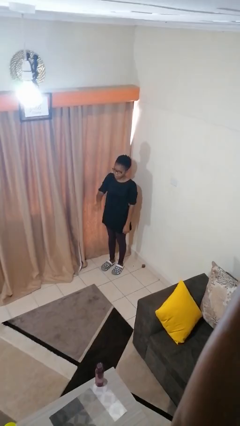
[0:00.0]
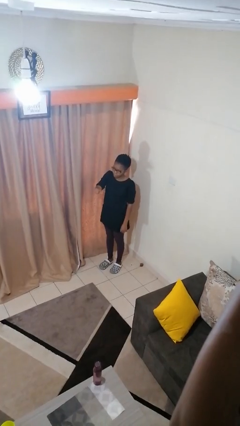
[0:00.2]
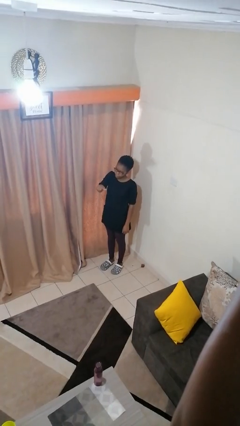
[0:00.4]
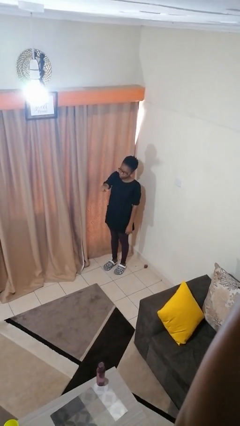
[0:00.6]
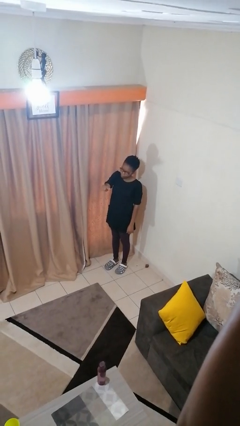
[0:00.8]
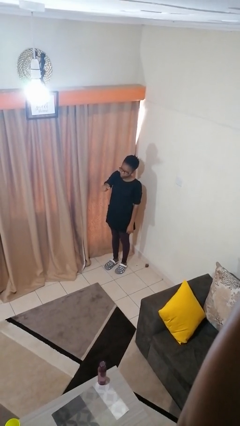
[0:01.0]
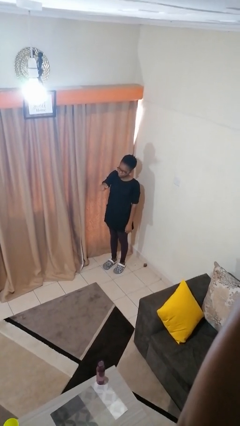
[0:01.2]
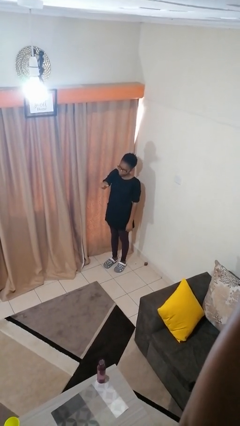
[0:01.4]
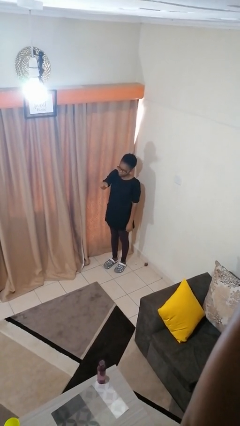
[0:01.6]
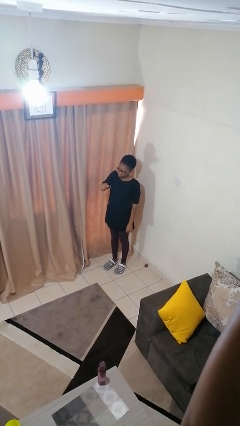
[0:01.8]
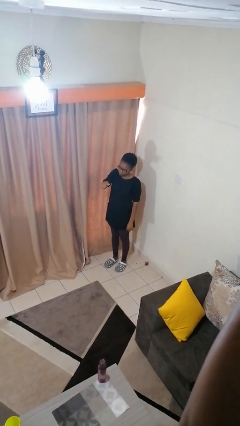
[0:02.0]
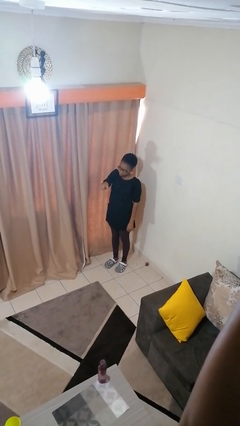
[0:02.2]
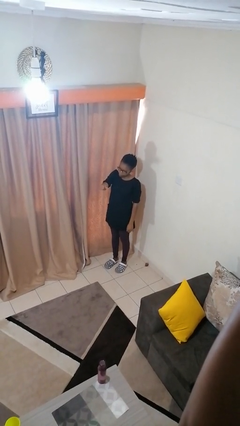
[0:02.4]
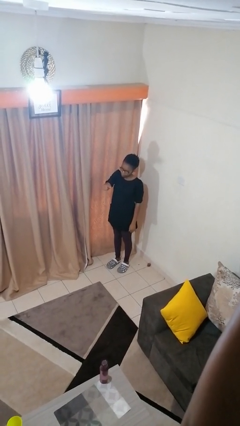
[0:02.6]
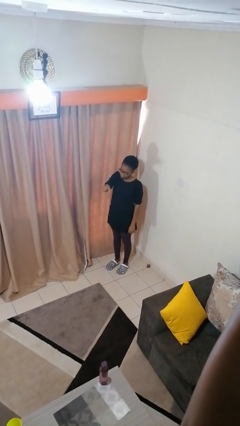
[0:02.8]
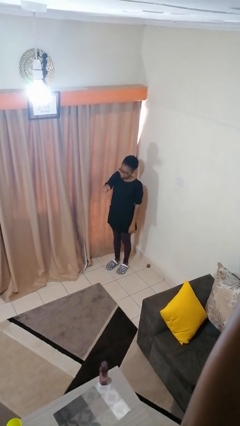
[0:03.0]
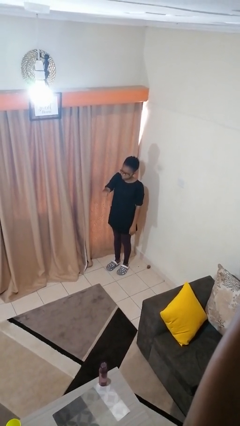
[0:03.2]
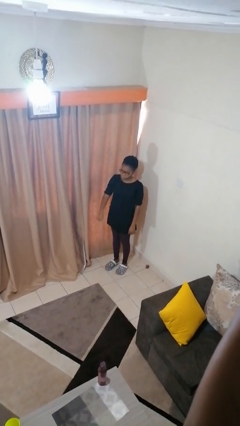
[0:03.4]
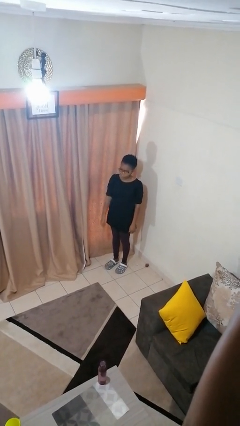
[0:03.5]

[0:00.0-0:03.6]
person gestures hang loose

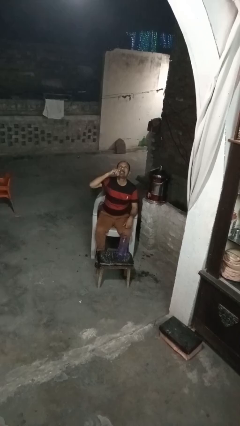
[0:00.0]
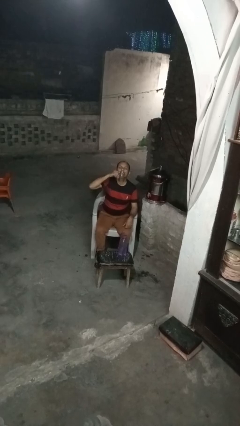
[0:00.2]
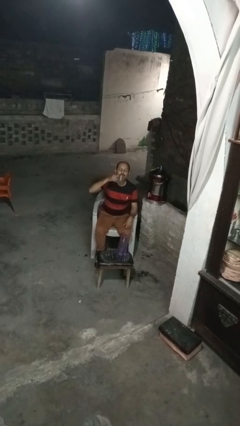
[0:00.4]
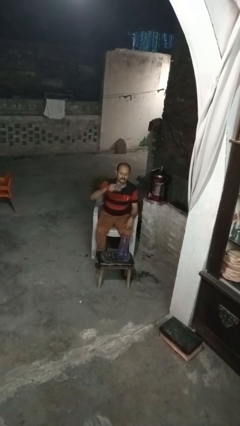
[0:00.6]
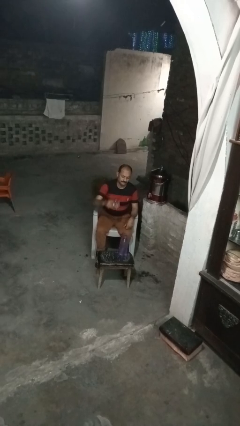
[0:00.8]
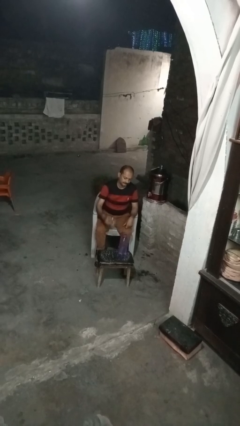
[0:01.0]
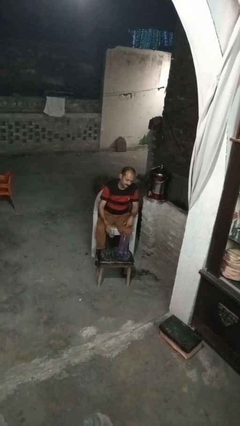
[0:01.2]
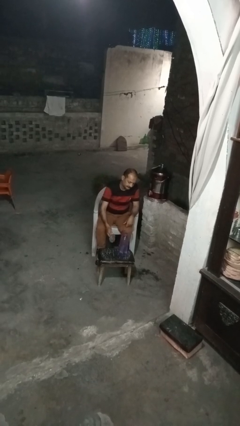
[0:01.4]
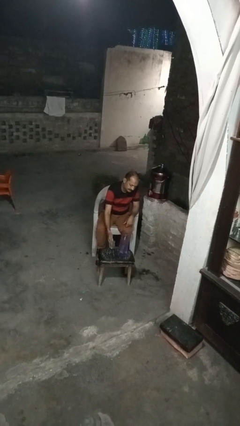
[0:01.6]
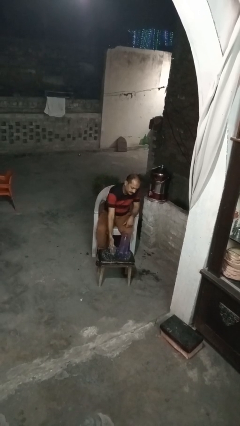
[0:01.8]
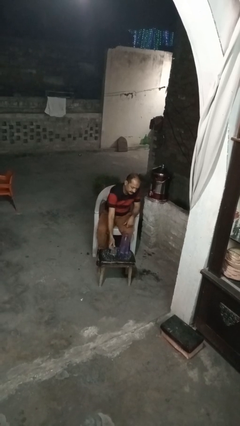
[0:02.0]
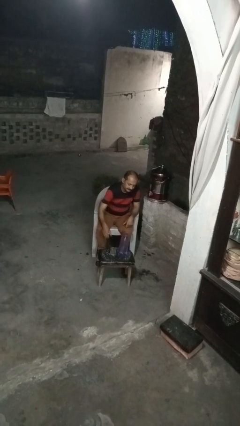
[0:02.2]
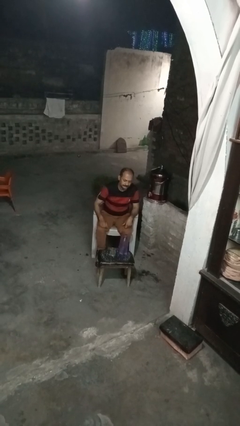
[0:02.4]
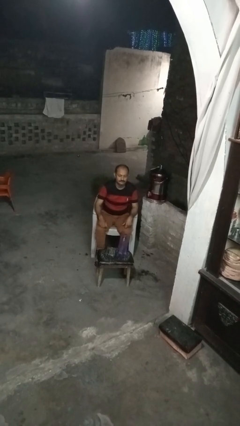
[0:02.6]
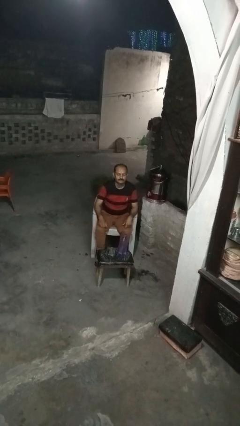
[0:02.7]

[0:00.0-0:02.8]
person puts down object on table

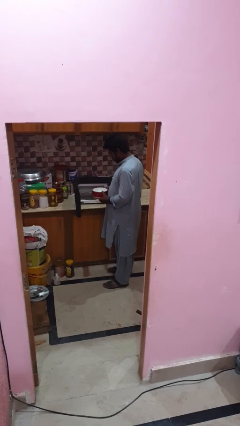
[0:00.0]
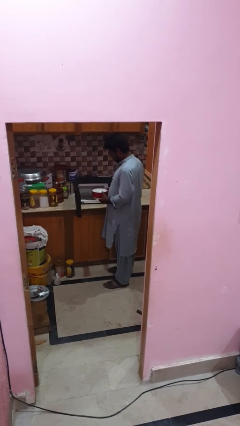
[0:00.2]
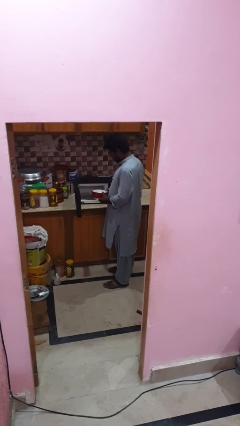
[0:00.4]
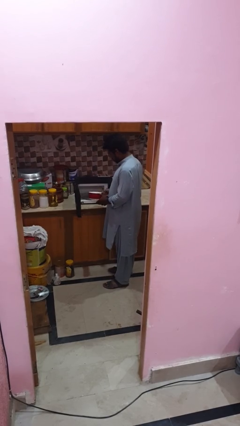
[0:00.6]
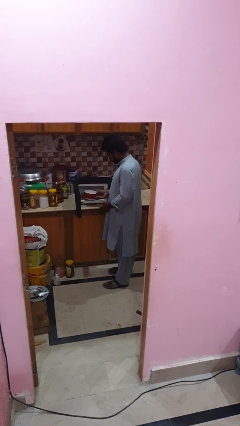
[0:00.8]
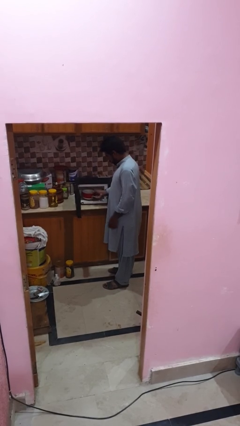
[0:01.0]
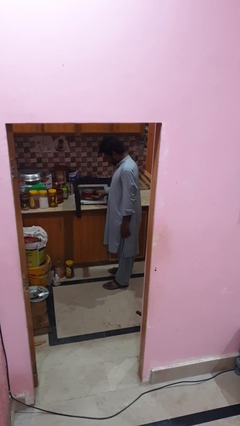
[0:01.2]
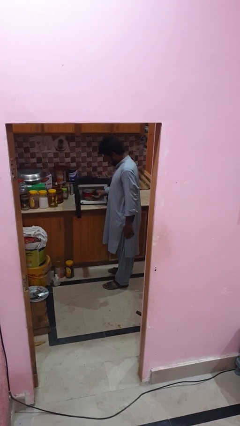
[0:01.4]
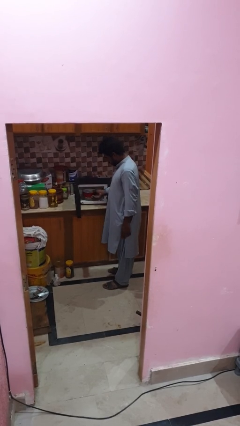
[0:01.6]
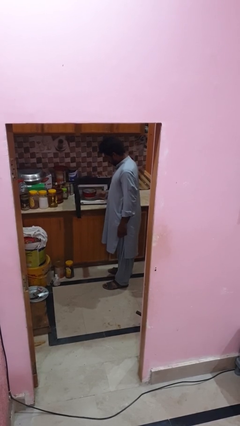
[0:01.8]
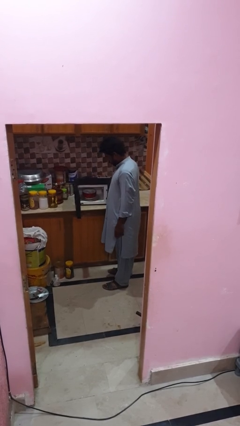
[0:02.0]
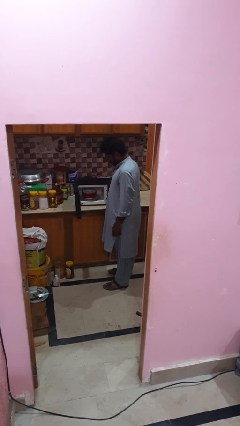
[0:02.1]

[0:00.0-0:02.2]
person puts object into microwave

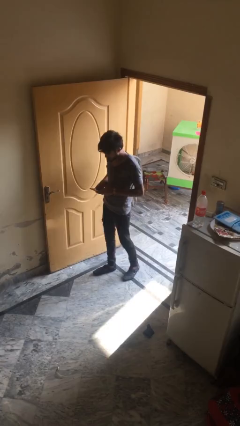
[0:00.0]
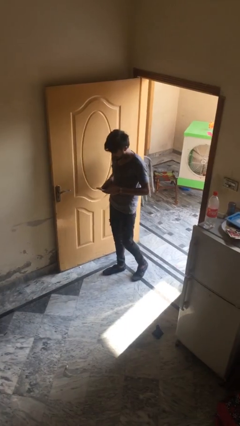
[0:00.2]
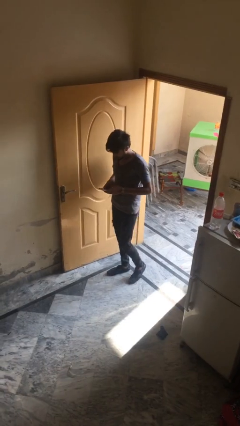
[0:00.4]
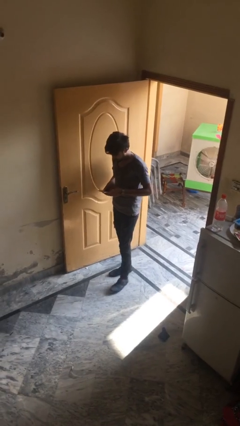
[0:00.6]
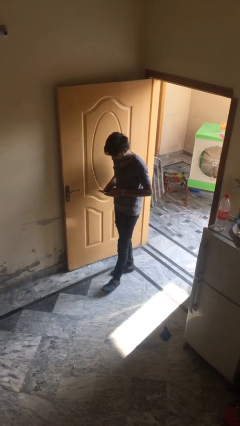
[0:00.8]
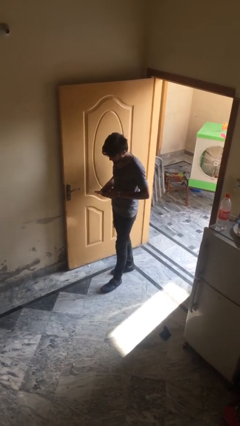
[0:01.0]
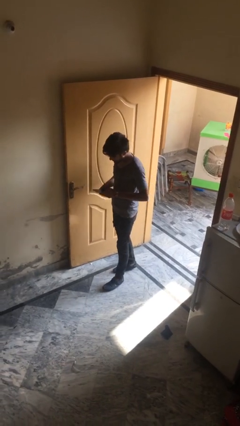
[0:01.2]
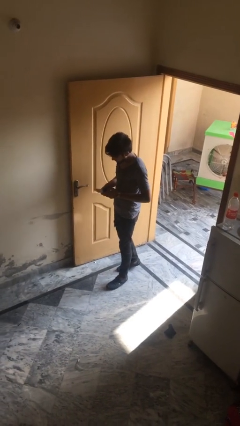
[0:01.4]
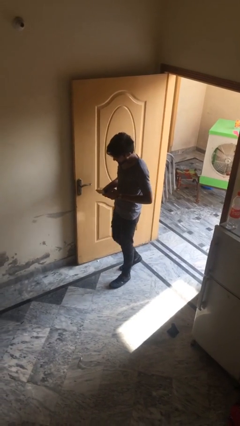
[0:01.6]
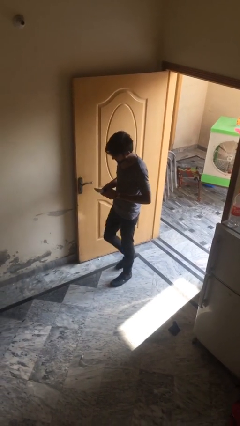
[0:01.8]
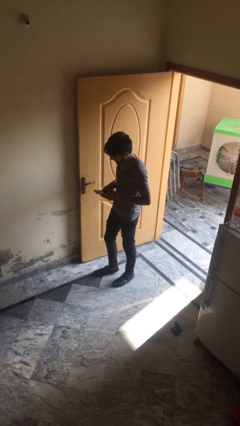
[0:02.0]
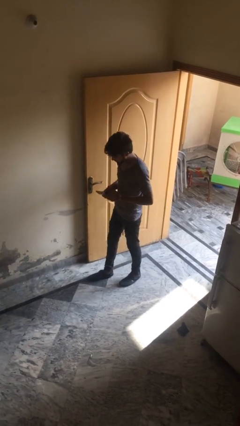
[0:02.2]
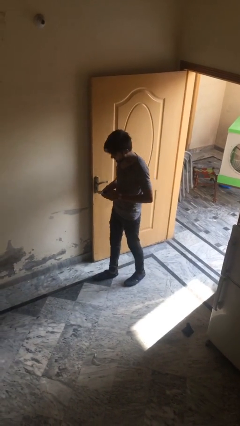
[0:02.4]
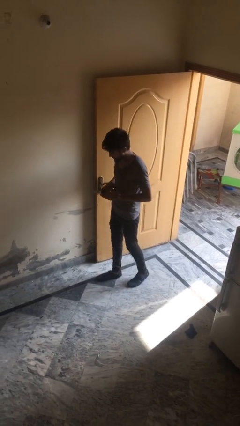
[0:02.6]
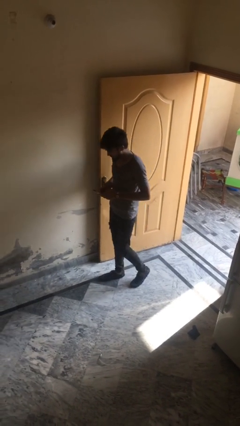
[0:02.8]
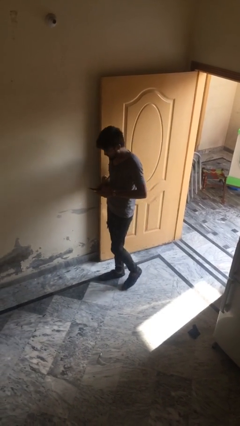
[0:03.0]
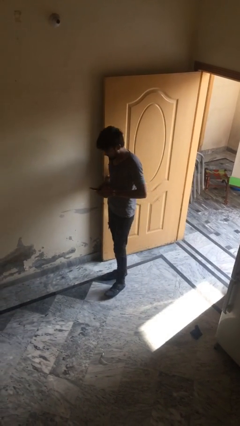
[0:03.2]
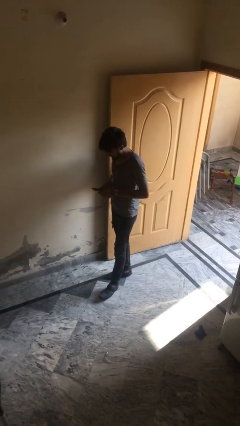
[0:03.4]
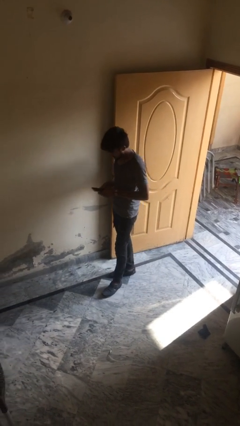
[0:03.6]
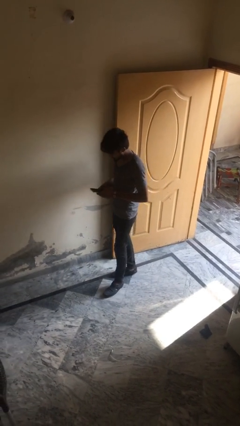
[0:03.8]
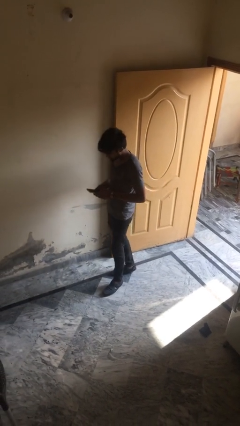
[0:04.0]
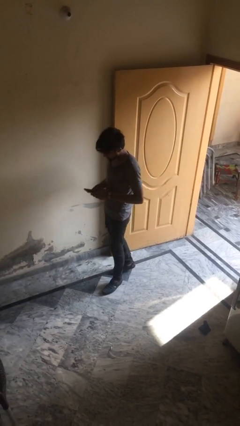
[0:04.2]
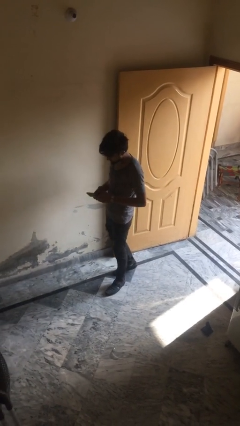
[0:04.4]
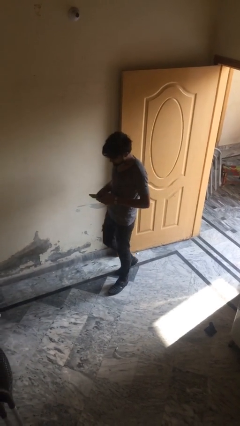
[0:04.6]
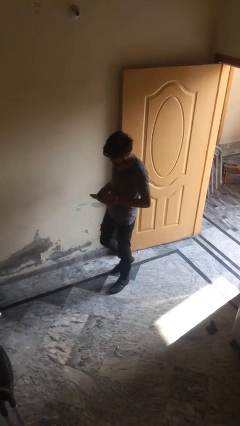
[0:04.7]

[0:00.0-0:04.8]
person texts on phone

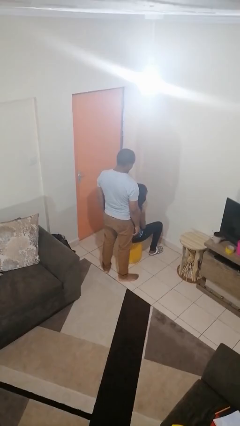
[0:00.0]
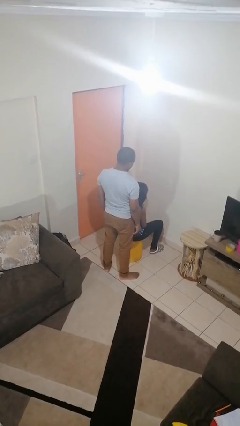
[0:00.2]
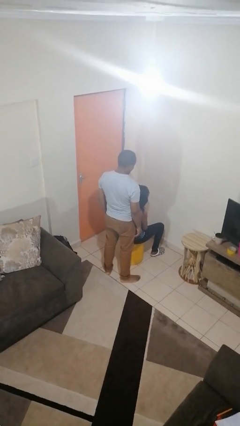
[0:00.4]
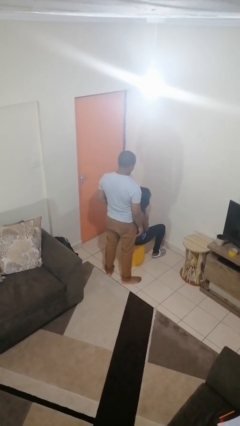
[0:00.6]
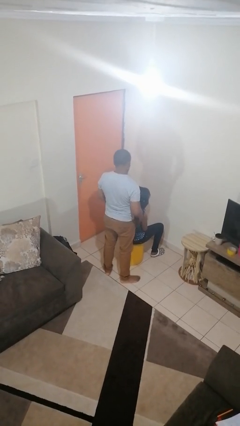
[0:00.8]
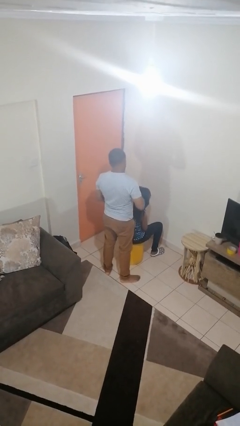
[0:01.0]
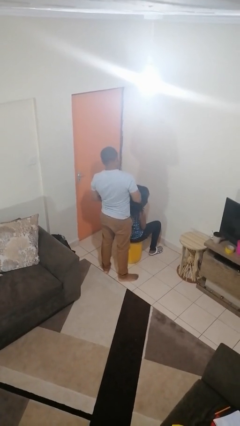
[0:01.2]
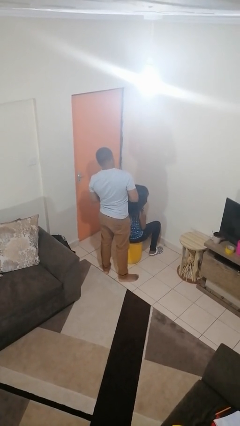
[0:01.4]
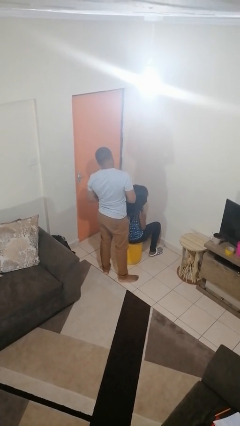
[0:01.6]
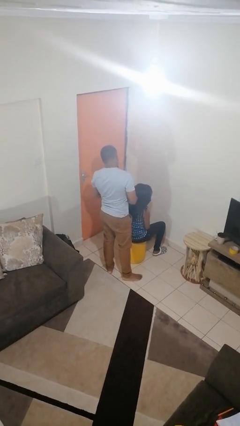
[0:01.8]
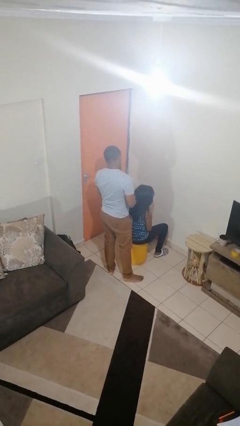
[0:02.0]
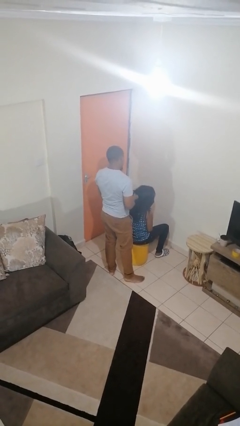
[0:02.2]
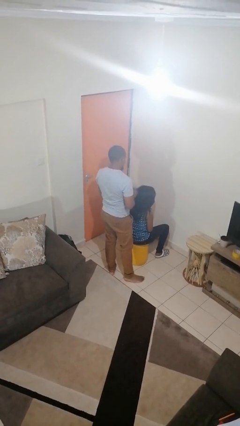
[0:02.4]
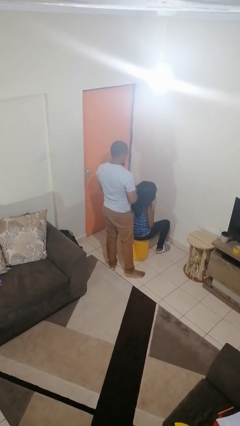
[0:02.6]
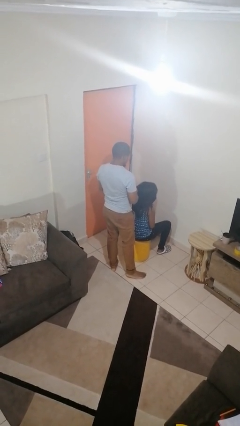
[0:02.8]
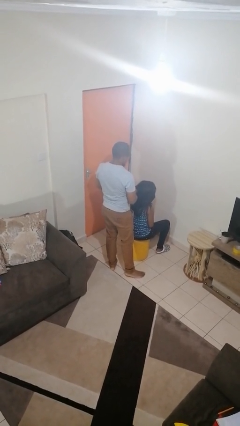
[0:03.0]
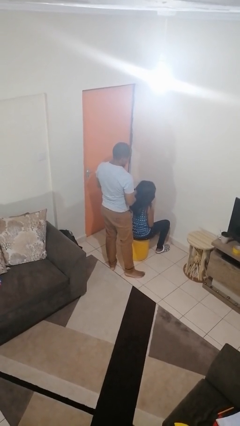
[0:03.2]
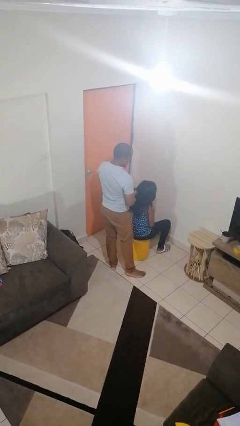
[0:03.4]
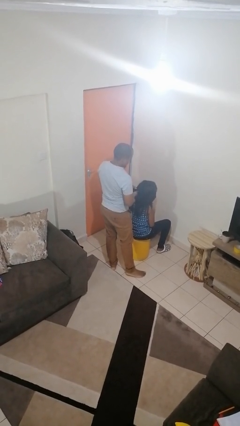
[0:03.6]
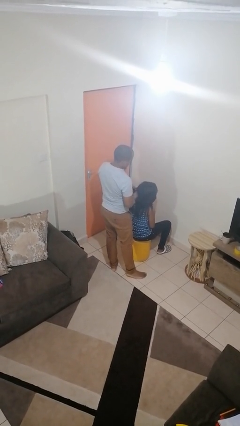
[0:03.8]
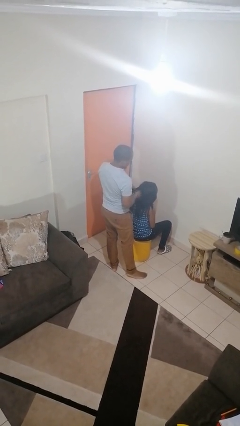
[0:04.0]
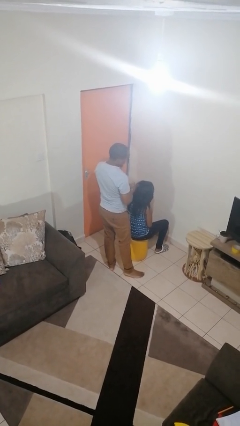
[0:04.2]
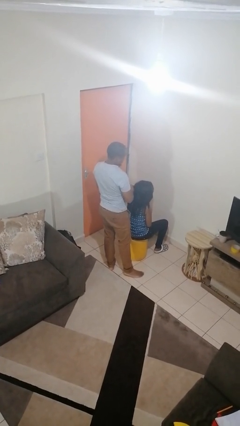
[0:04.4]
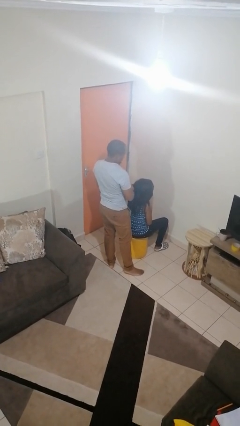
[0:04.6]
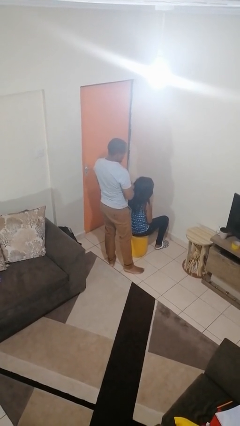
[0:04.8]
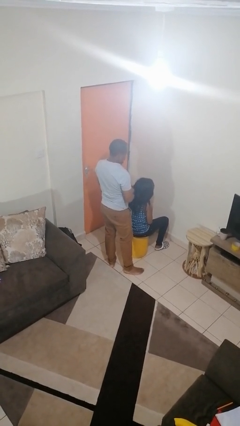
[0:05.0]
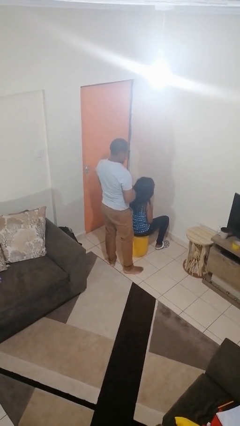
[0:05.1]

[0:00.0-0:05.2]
person braids hair of person
